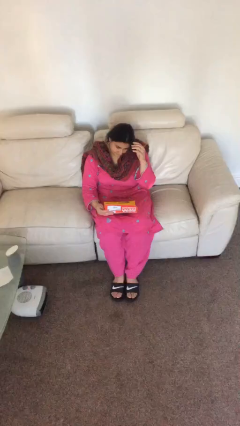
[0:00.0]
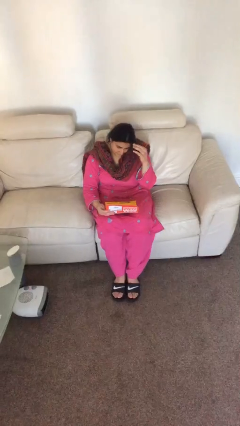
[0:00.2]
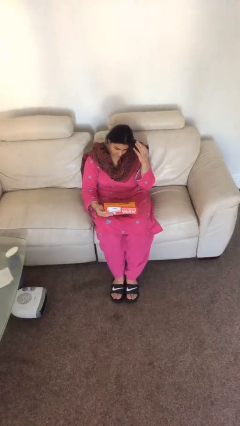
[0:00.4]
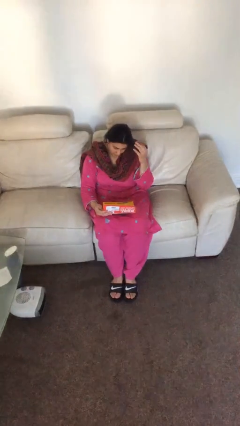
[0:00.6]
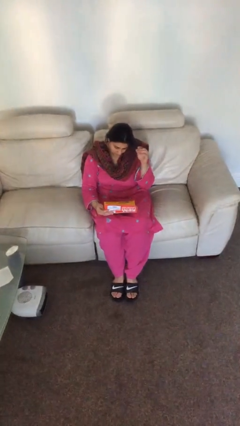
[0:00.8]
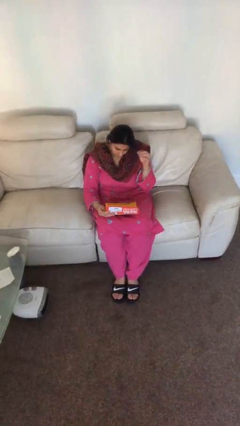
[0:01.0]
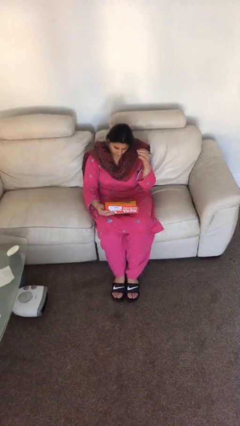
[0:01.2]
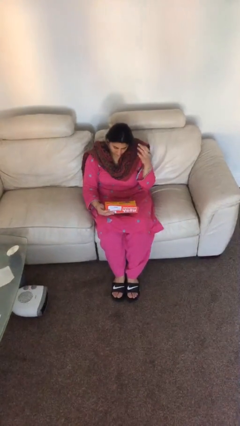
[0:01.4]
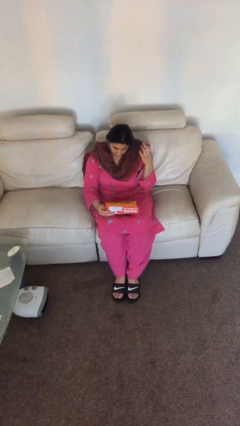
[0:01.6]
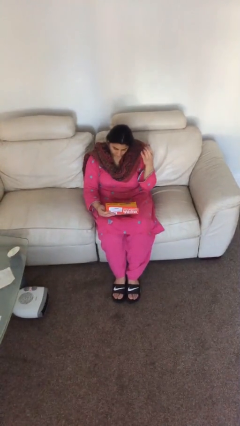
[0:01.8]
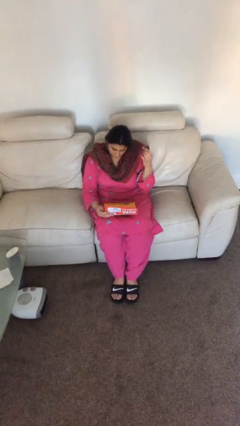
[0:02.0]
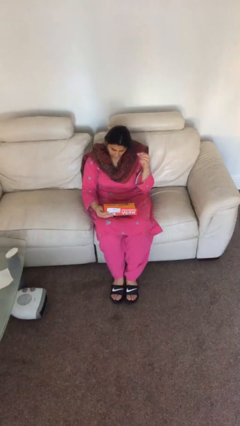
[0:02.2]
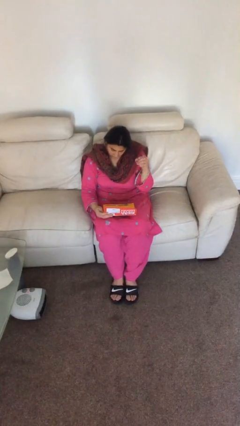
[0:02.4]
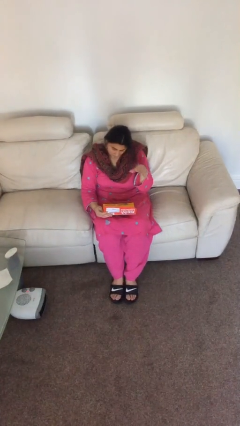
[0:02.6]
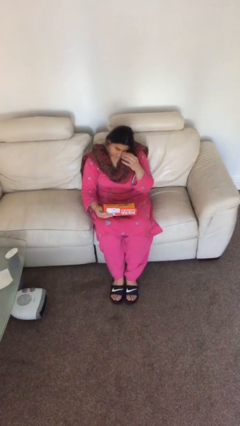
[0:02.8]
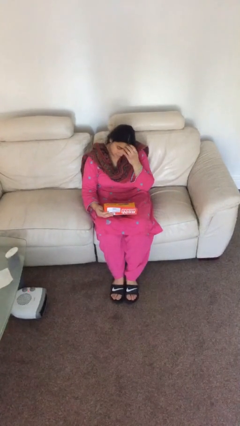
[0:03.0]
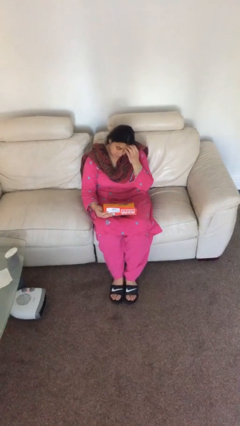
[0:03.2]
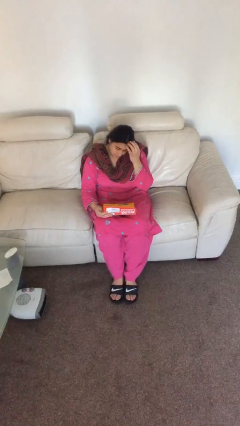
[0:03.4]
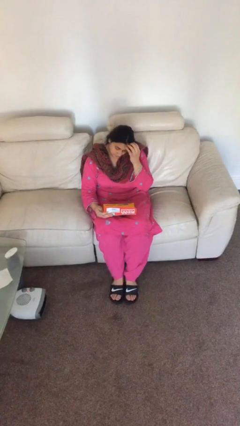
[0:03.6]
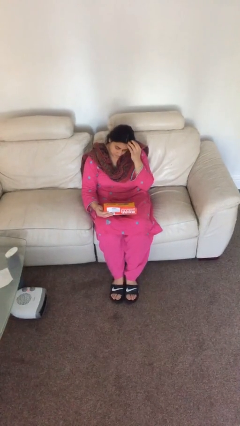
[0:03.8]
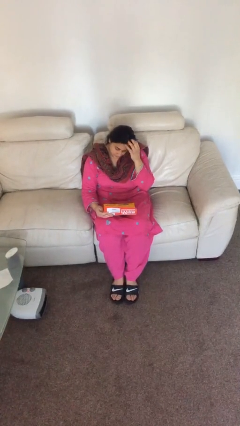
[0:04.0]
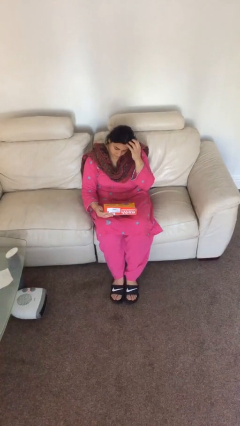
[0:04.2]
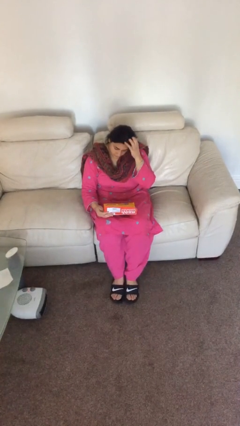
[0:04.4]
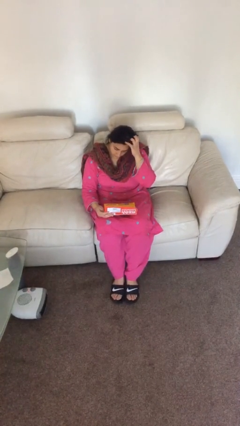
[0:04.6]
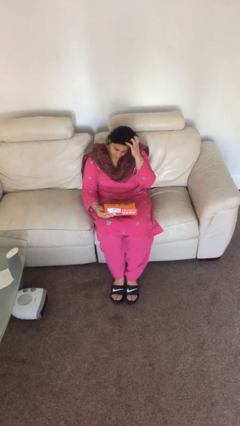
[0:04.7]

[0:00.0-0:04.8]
person reads document

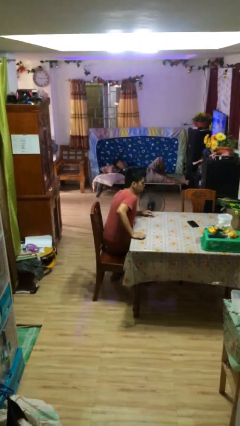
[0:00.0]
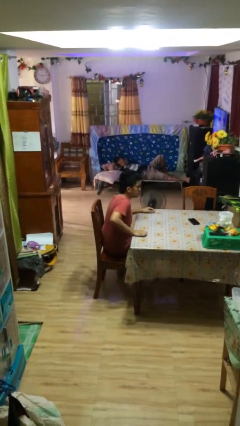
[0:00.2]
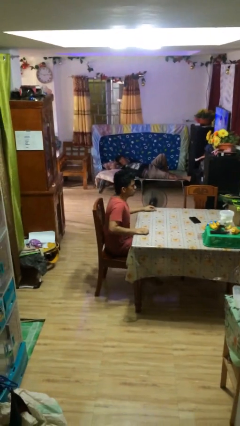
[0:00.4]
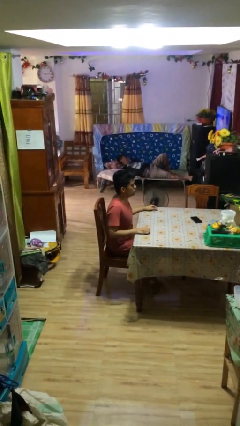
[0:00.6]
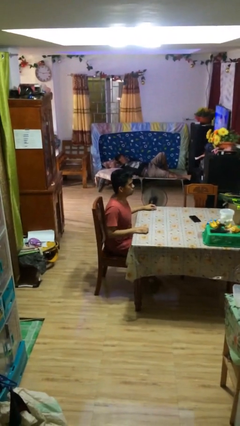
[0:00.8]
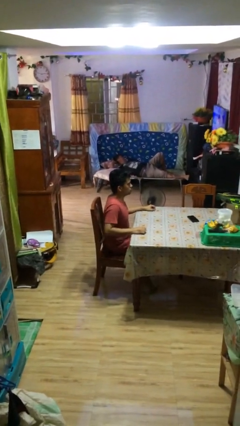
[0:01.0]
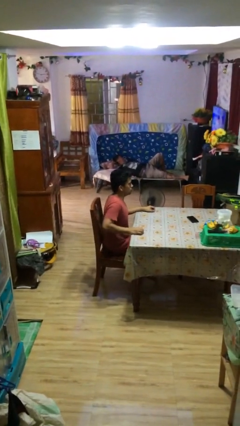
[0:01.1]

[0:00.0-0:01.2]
person sits down

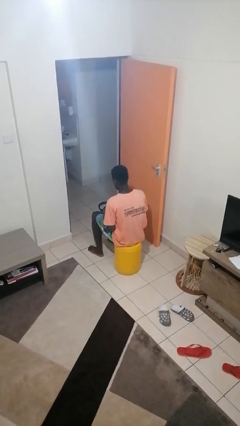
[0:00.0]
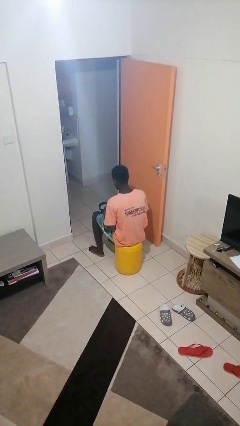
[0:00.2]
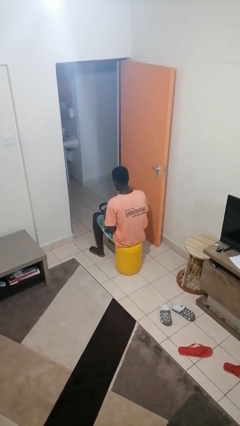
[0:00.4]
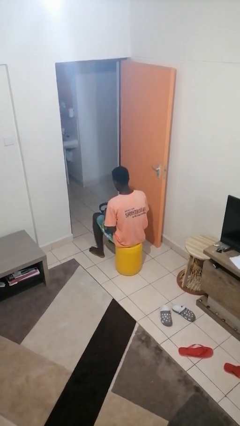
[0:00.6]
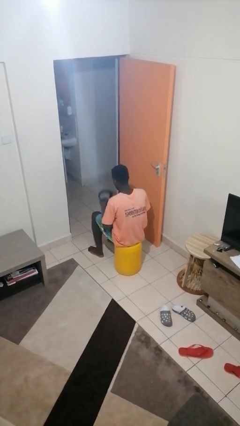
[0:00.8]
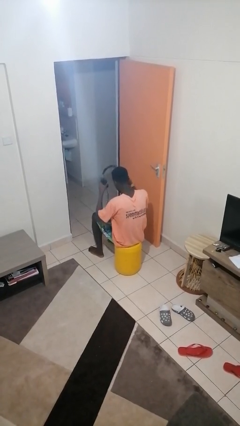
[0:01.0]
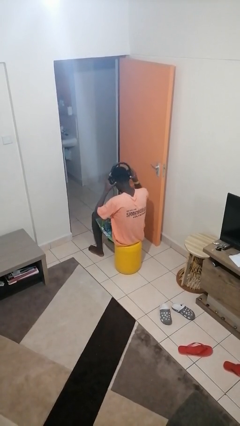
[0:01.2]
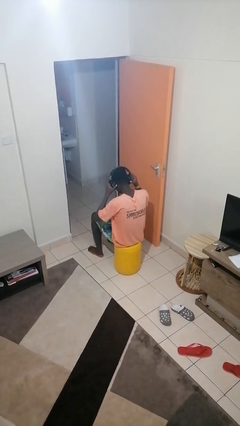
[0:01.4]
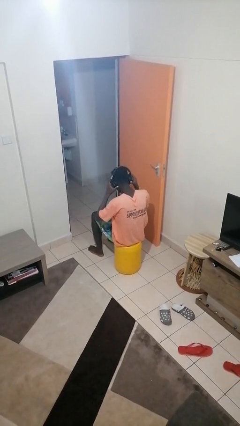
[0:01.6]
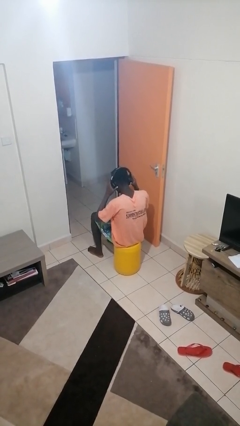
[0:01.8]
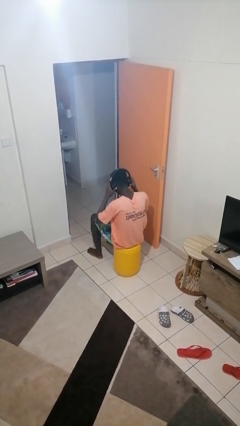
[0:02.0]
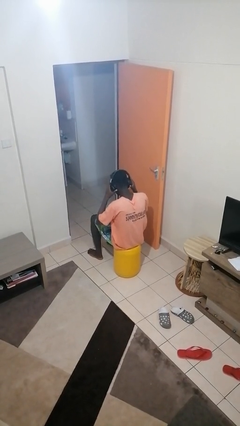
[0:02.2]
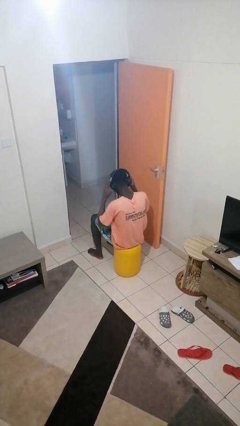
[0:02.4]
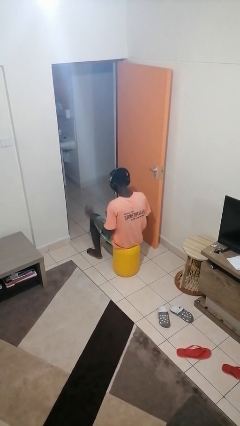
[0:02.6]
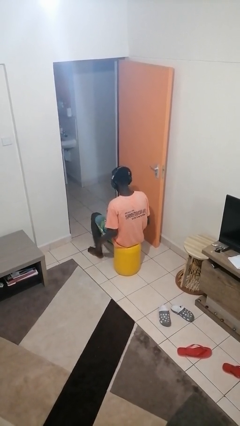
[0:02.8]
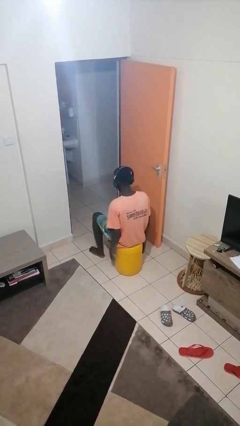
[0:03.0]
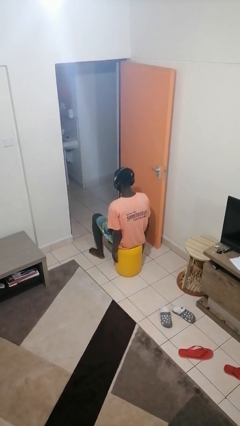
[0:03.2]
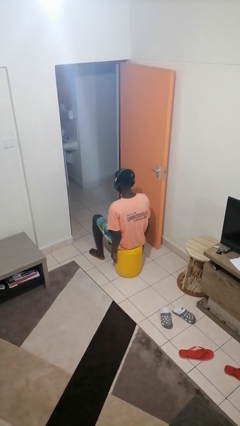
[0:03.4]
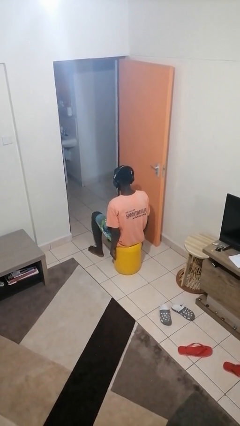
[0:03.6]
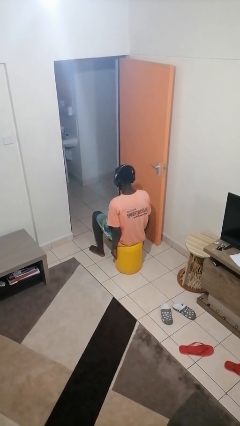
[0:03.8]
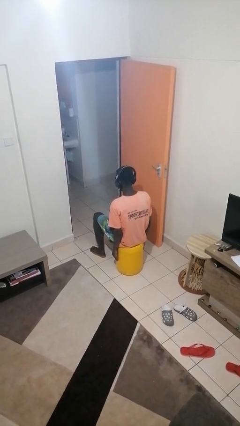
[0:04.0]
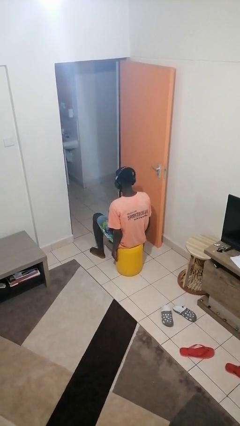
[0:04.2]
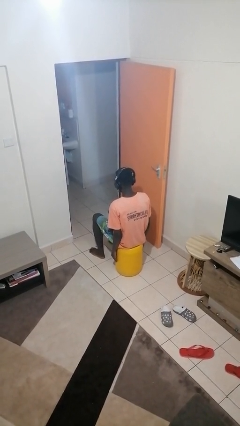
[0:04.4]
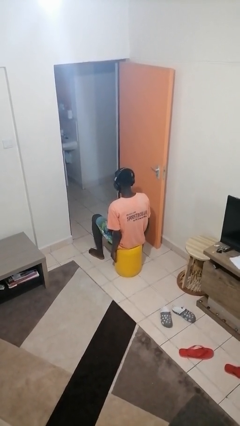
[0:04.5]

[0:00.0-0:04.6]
person puts on headphones

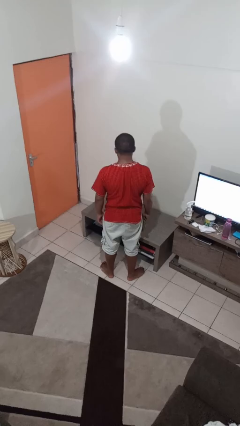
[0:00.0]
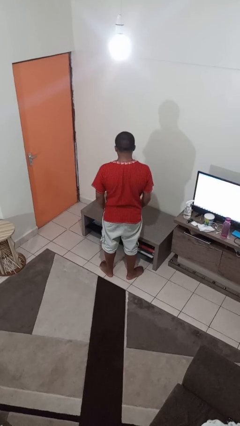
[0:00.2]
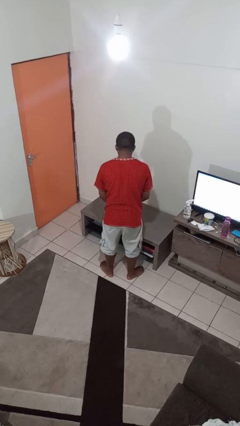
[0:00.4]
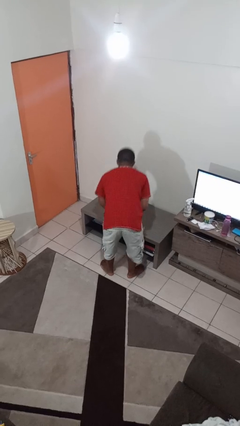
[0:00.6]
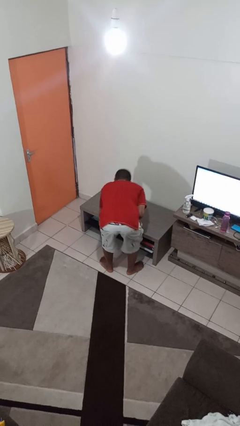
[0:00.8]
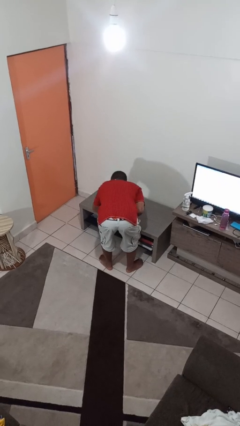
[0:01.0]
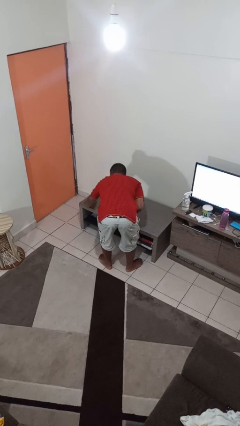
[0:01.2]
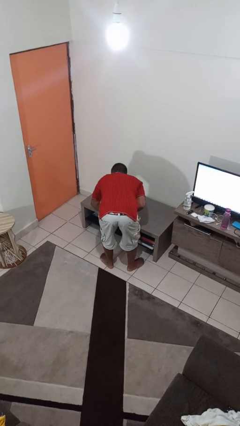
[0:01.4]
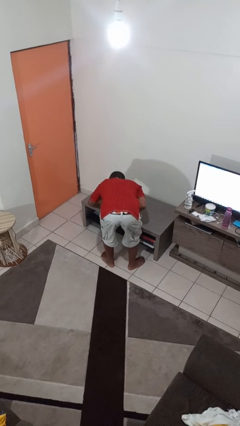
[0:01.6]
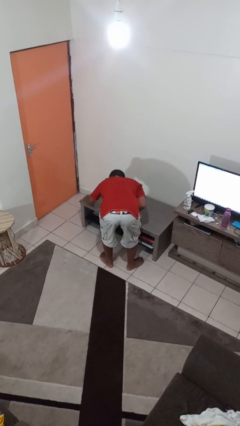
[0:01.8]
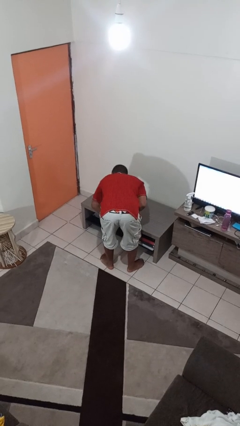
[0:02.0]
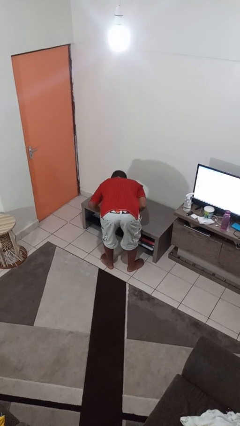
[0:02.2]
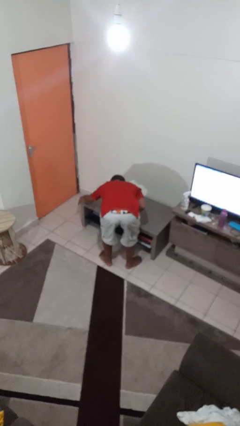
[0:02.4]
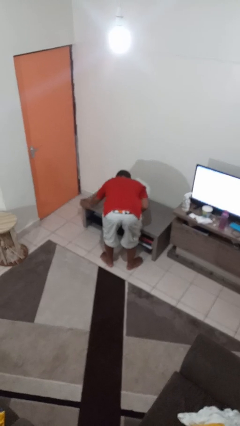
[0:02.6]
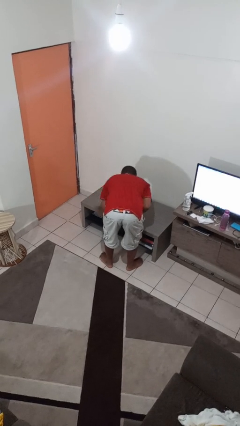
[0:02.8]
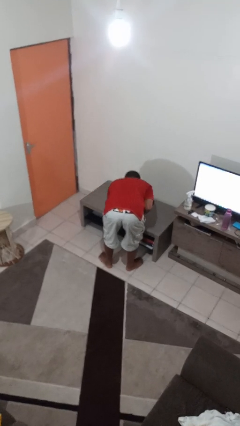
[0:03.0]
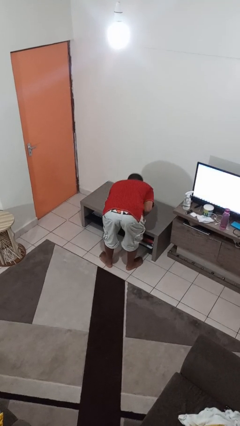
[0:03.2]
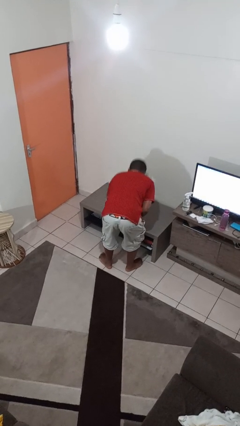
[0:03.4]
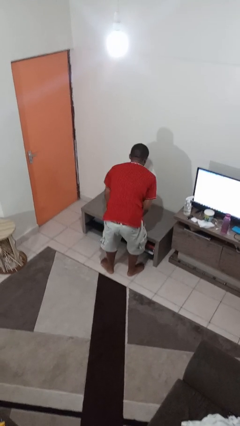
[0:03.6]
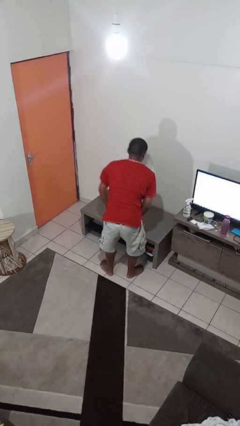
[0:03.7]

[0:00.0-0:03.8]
person cleans table with rag

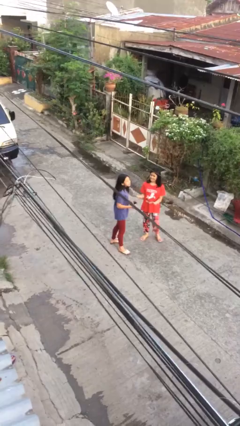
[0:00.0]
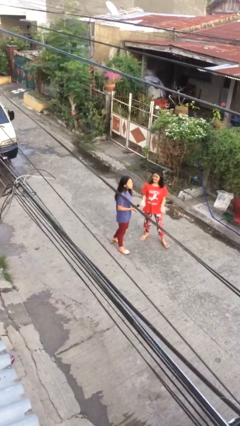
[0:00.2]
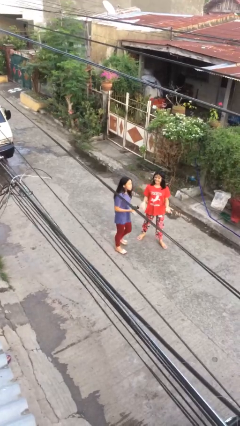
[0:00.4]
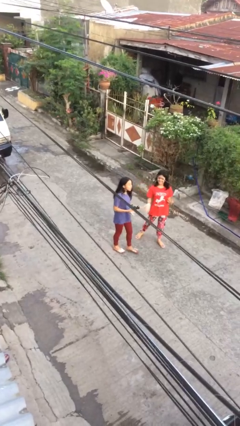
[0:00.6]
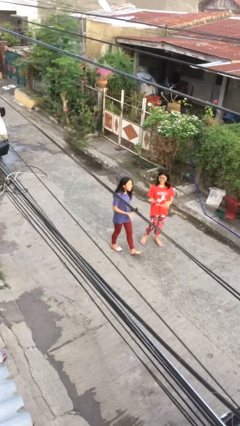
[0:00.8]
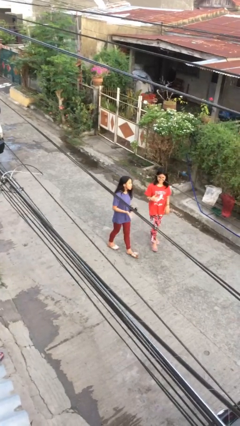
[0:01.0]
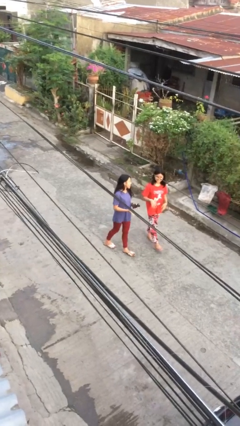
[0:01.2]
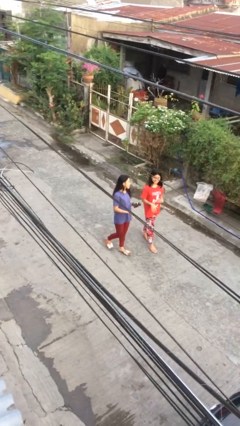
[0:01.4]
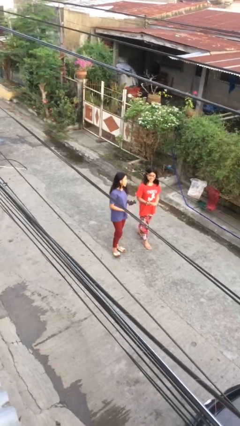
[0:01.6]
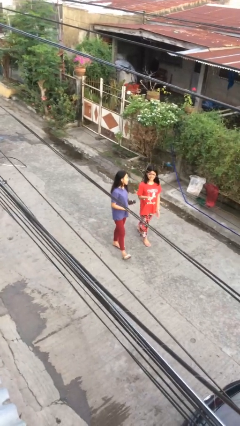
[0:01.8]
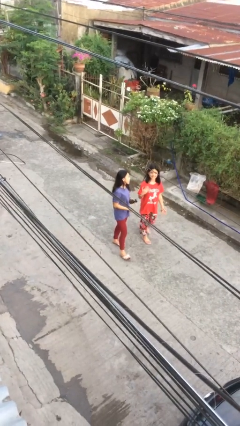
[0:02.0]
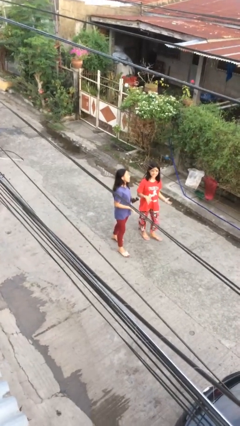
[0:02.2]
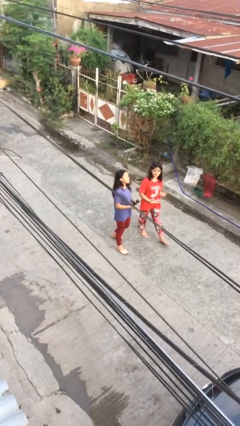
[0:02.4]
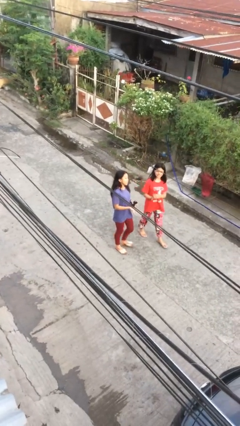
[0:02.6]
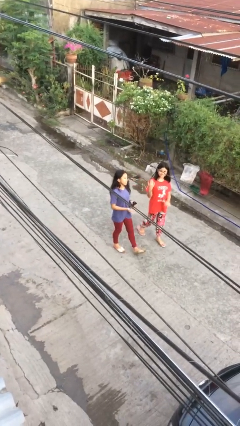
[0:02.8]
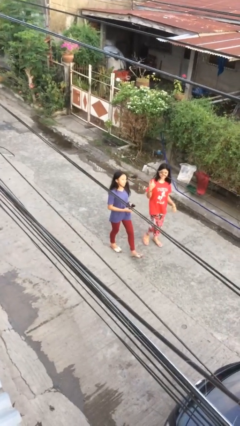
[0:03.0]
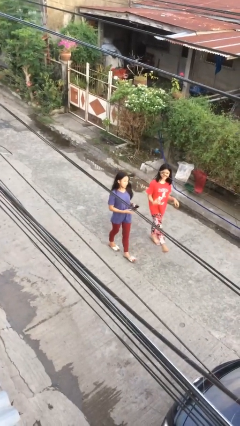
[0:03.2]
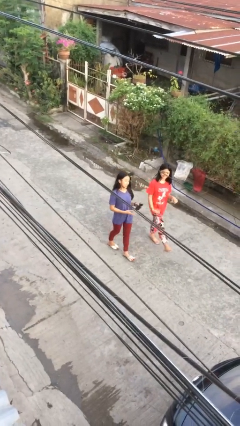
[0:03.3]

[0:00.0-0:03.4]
person talks to person
